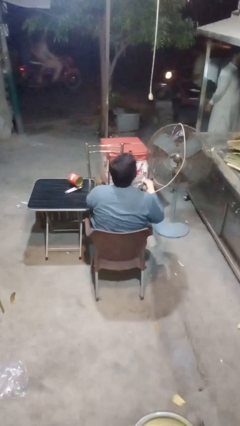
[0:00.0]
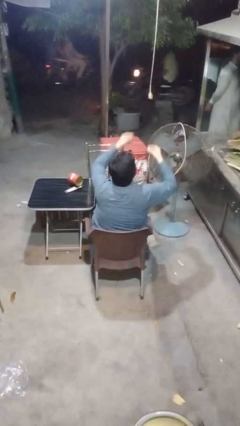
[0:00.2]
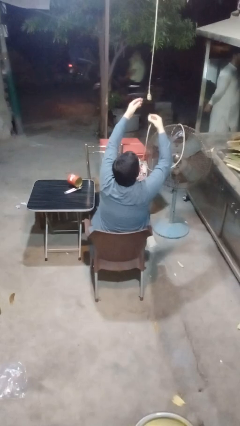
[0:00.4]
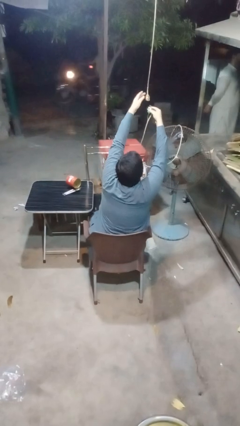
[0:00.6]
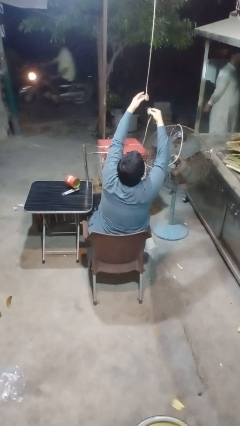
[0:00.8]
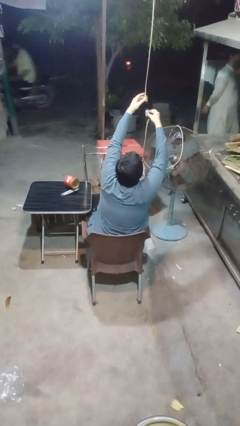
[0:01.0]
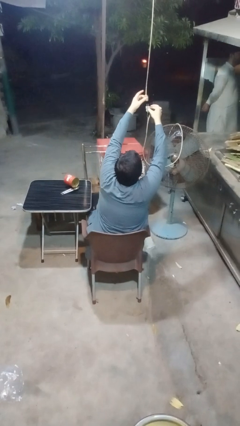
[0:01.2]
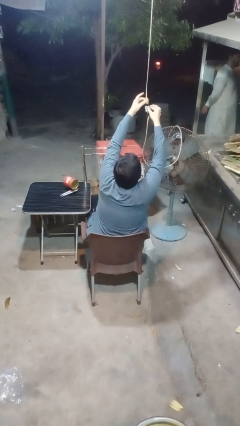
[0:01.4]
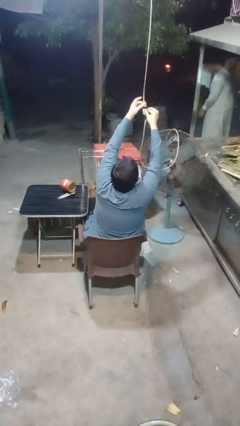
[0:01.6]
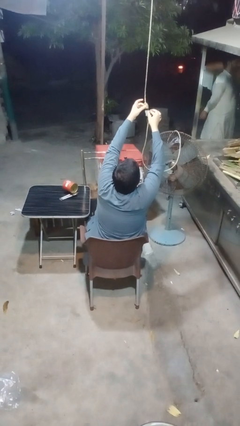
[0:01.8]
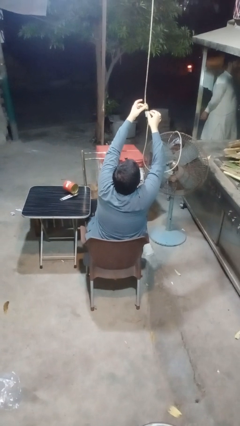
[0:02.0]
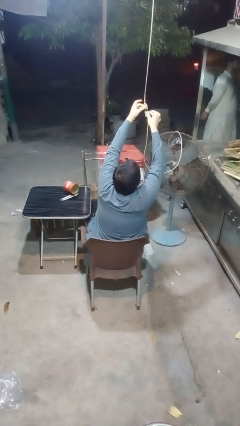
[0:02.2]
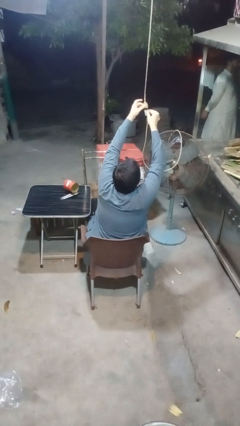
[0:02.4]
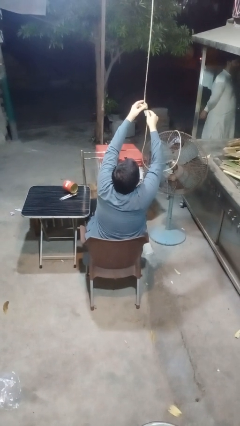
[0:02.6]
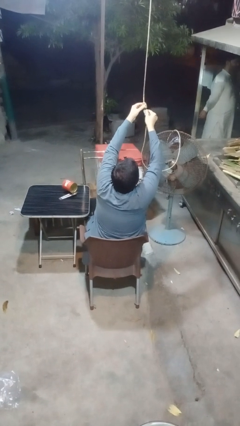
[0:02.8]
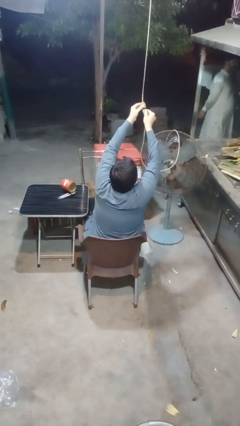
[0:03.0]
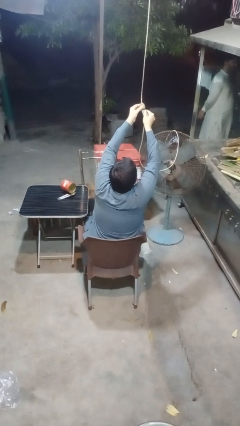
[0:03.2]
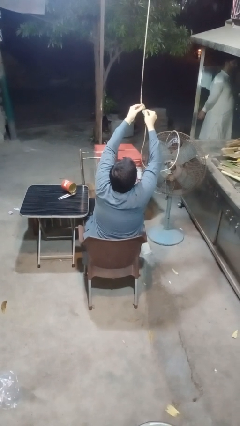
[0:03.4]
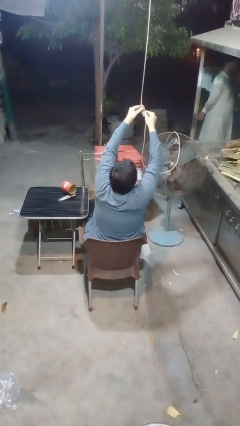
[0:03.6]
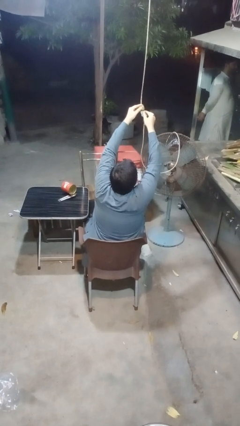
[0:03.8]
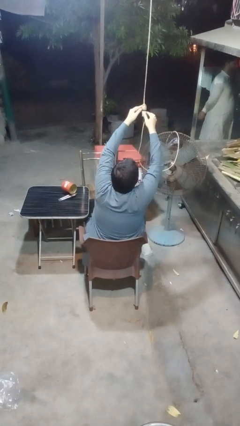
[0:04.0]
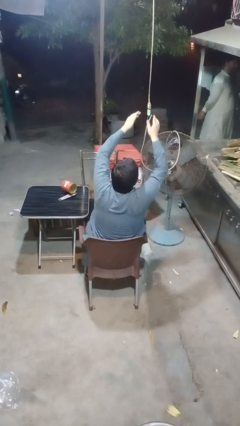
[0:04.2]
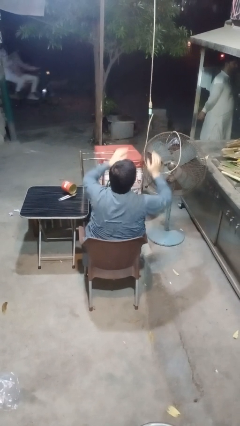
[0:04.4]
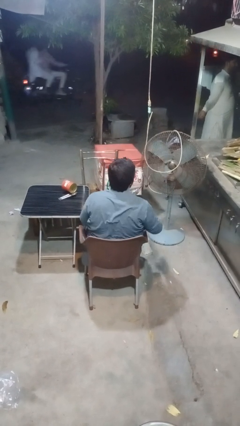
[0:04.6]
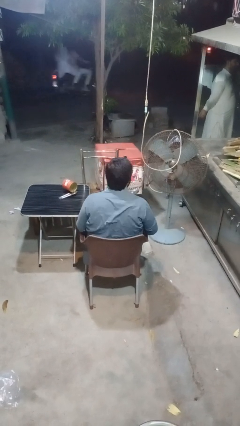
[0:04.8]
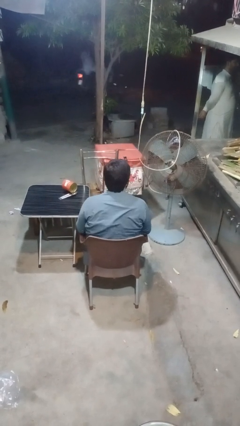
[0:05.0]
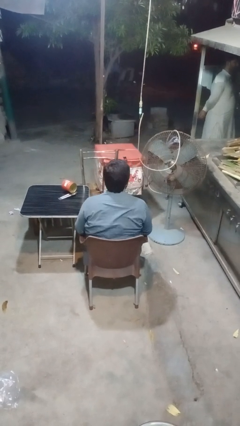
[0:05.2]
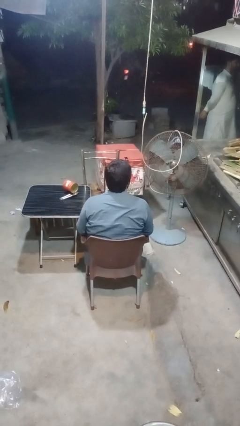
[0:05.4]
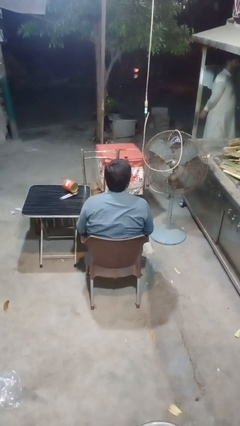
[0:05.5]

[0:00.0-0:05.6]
person turns on fan

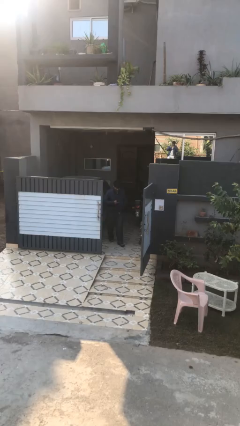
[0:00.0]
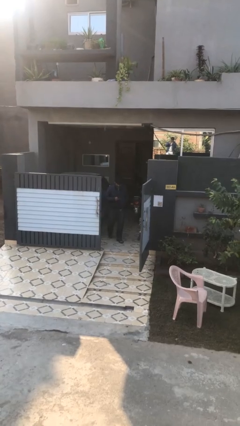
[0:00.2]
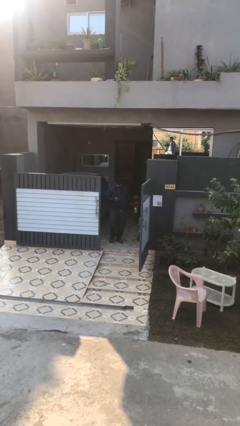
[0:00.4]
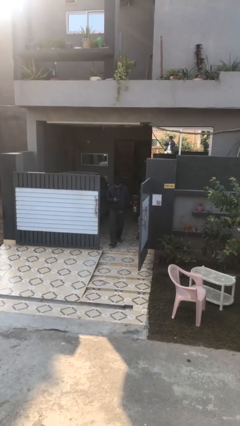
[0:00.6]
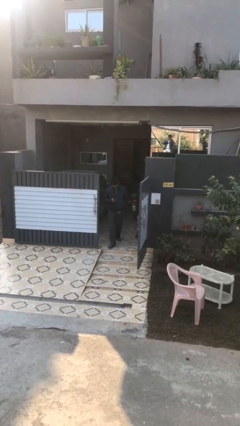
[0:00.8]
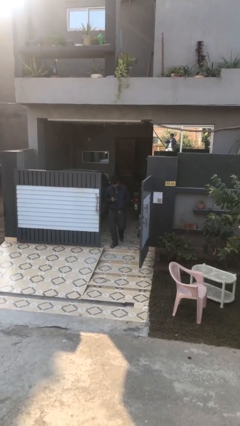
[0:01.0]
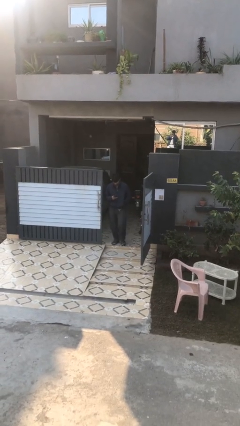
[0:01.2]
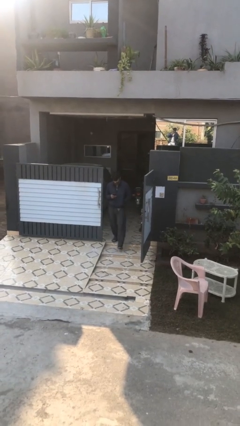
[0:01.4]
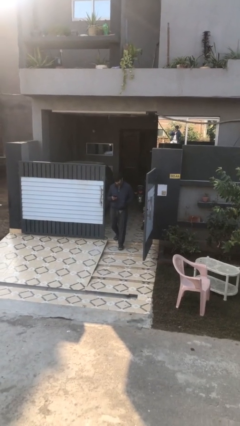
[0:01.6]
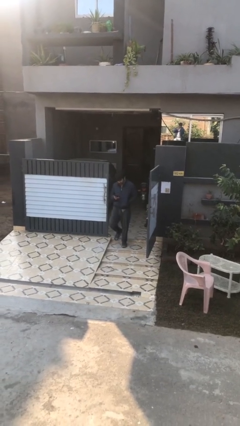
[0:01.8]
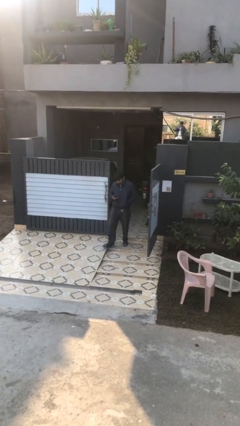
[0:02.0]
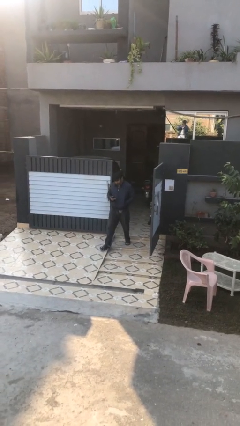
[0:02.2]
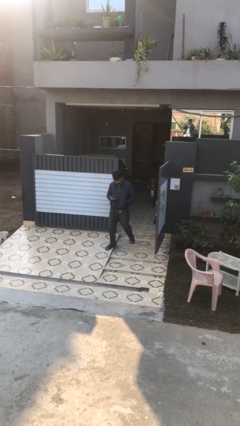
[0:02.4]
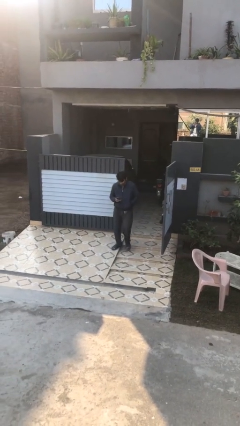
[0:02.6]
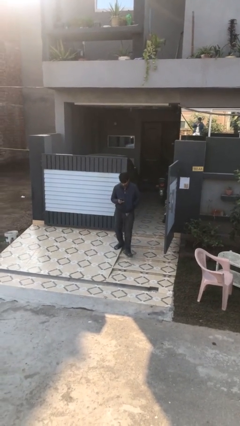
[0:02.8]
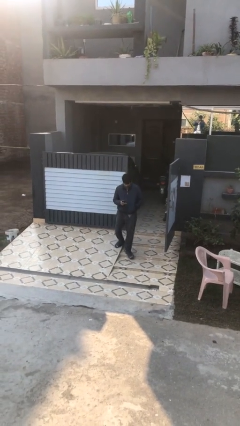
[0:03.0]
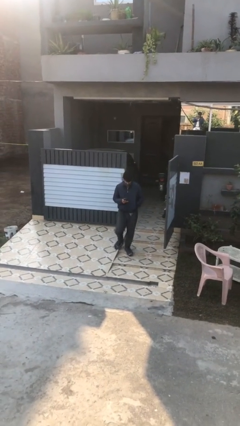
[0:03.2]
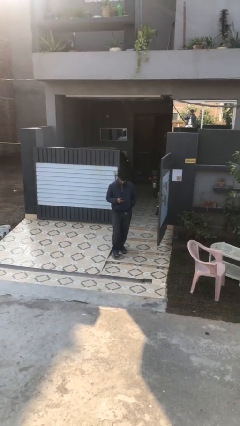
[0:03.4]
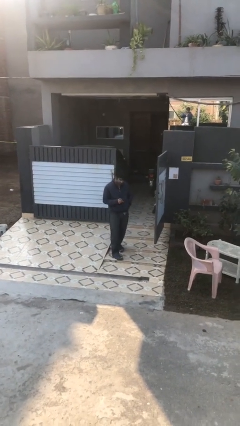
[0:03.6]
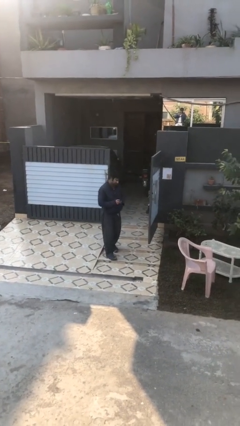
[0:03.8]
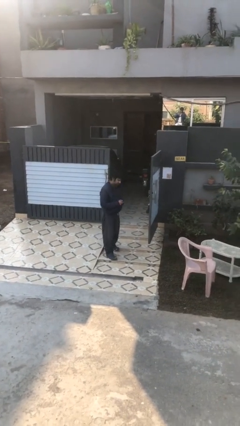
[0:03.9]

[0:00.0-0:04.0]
person enters scene through structure

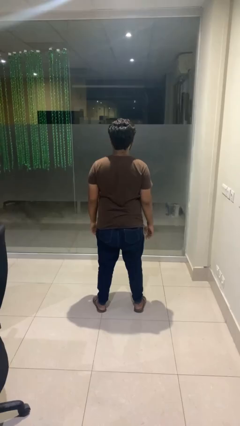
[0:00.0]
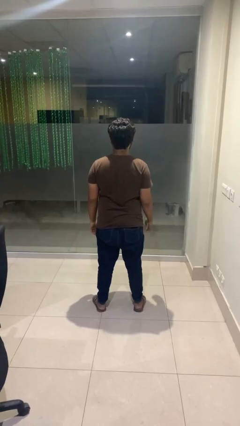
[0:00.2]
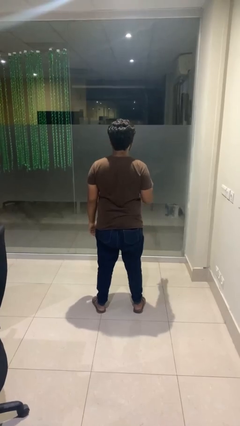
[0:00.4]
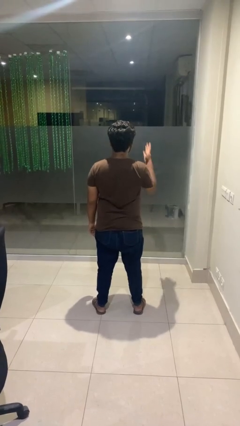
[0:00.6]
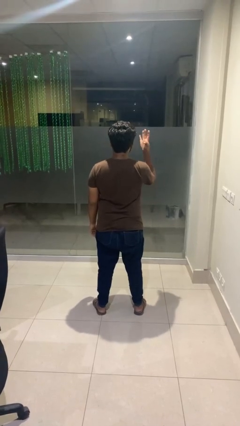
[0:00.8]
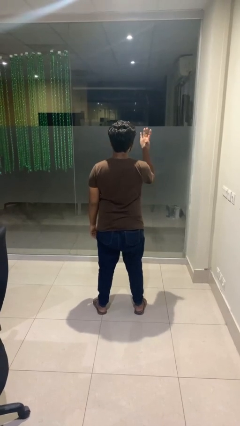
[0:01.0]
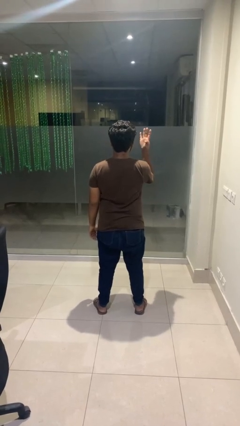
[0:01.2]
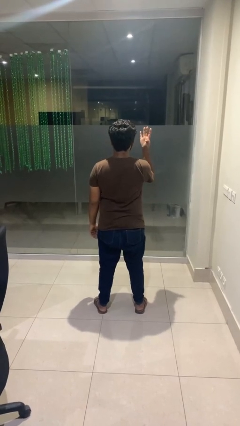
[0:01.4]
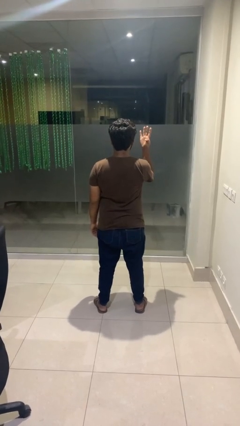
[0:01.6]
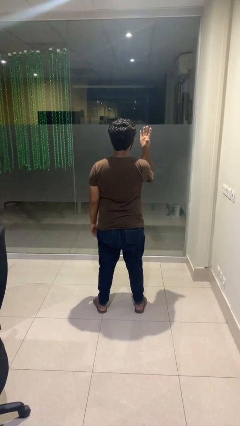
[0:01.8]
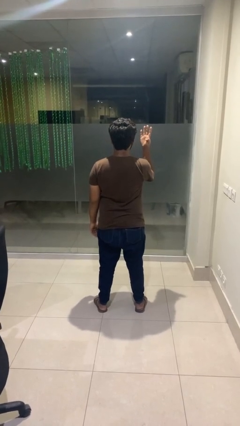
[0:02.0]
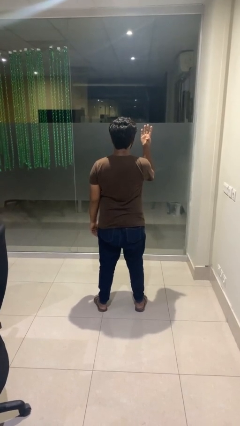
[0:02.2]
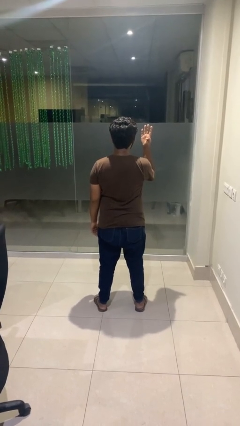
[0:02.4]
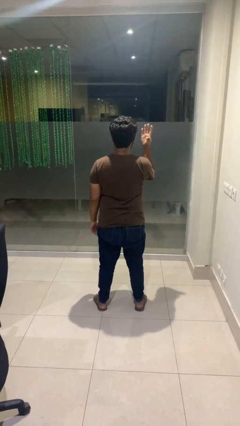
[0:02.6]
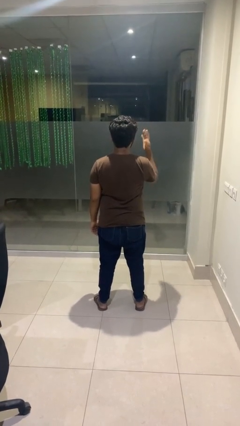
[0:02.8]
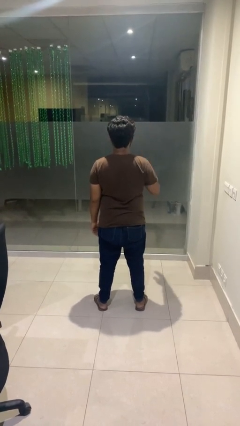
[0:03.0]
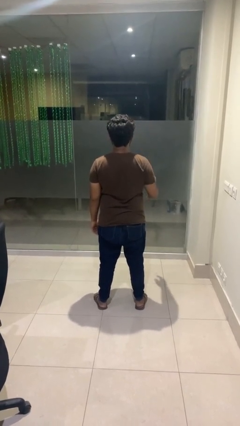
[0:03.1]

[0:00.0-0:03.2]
person gestures number four

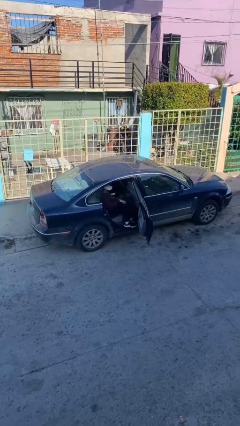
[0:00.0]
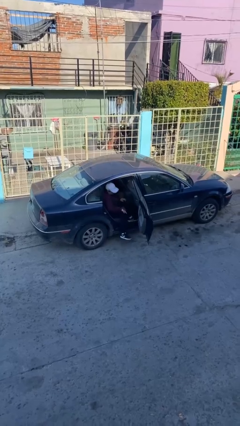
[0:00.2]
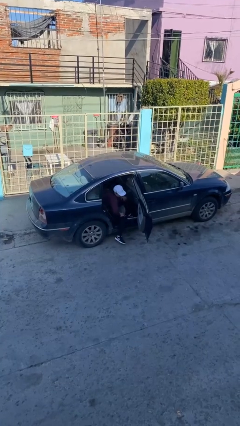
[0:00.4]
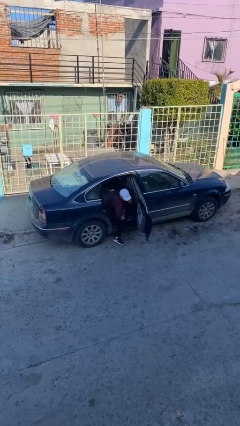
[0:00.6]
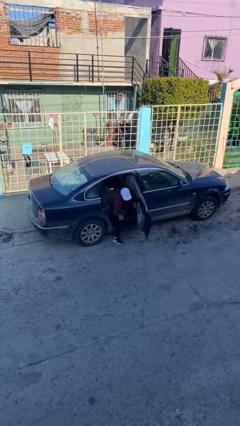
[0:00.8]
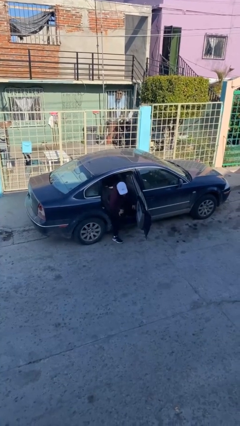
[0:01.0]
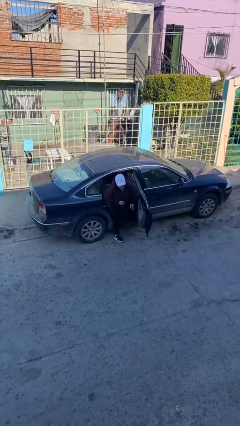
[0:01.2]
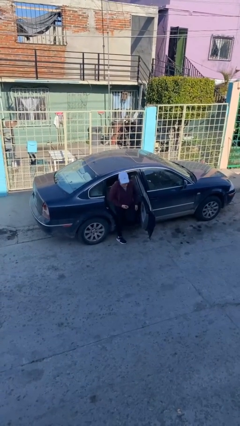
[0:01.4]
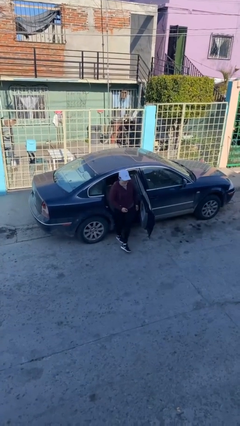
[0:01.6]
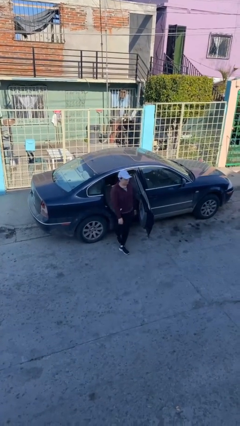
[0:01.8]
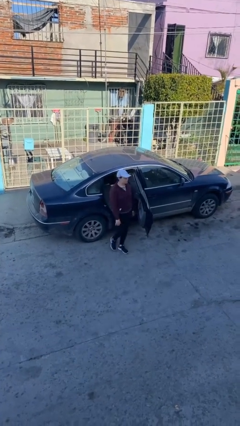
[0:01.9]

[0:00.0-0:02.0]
person exits car

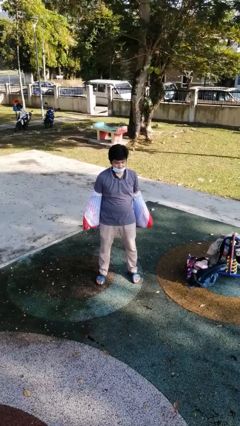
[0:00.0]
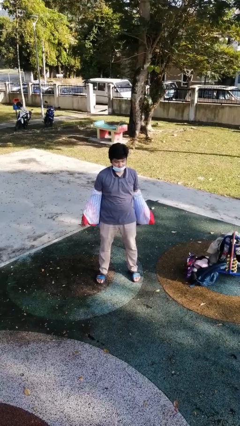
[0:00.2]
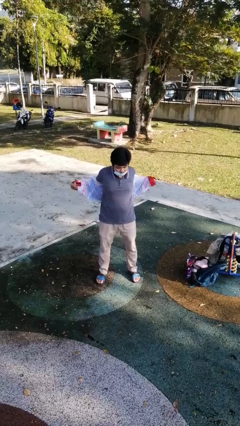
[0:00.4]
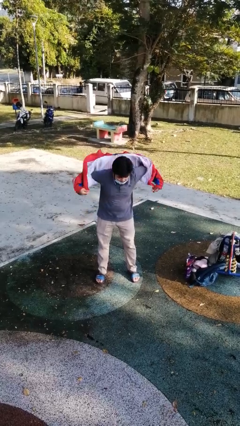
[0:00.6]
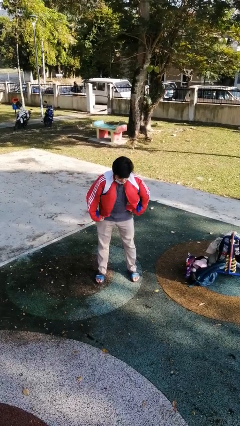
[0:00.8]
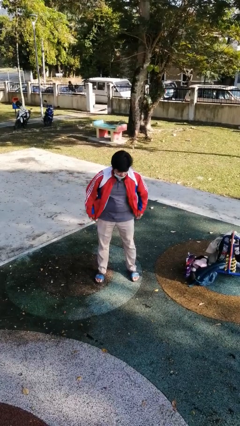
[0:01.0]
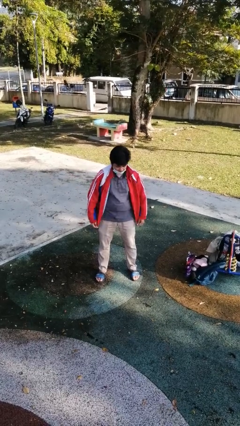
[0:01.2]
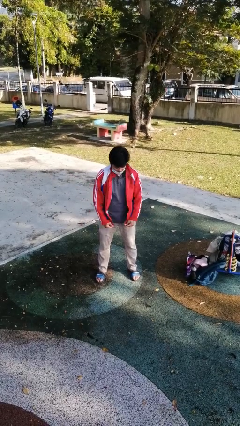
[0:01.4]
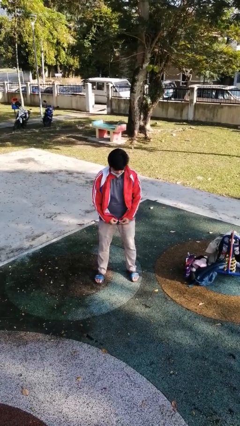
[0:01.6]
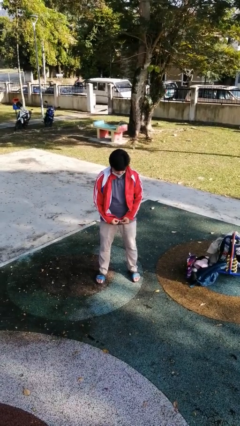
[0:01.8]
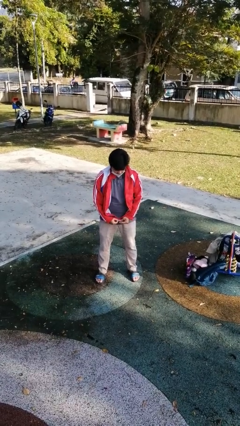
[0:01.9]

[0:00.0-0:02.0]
person puts on jacket

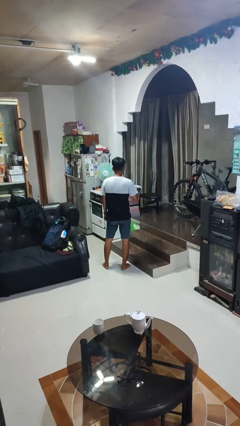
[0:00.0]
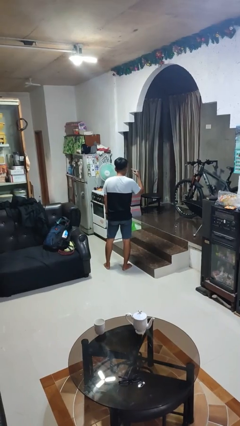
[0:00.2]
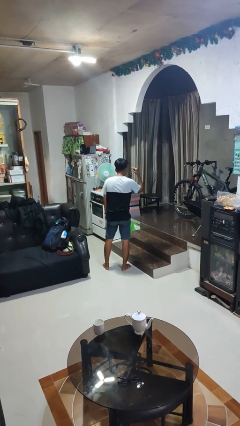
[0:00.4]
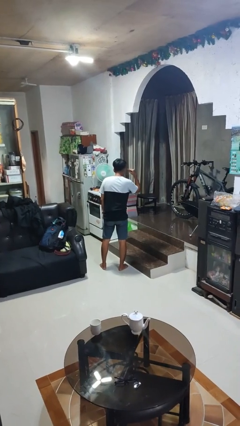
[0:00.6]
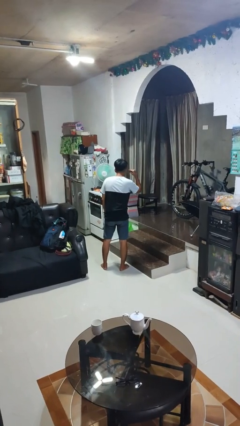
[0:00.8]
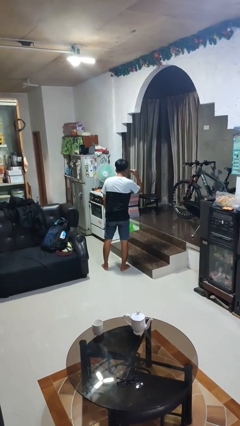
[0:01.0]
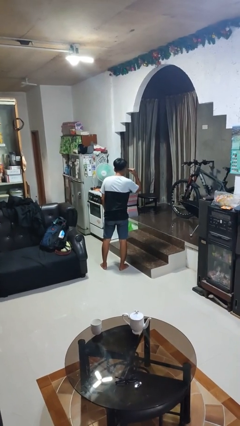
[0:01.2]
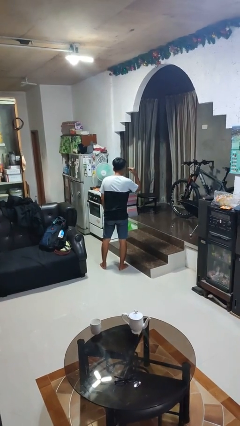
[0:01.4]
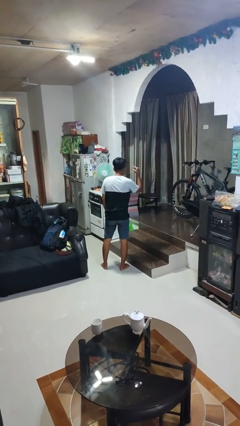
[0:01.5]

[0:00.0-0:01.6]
person gestures listen closely
